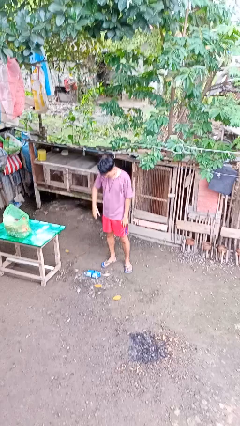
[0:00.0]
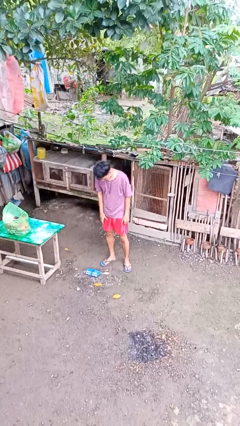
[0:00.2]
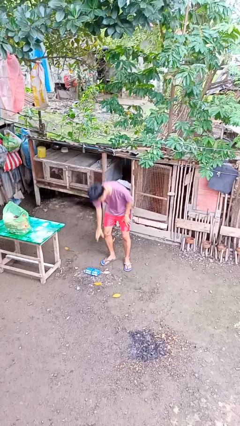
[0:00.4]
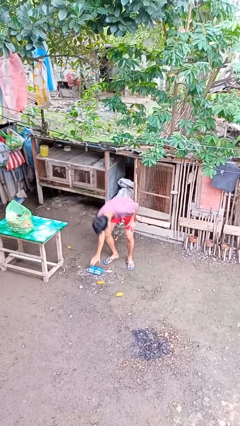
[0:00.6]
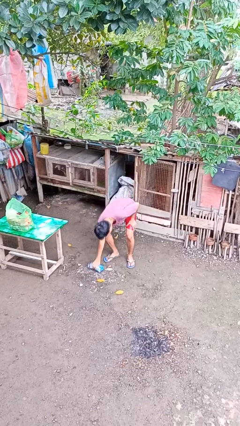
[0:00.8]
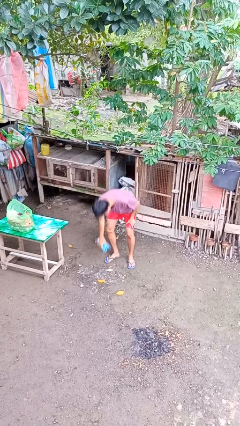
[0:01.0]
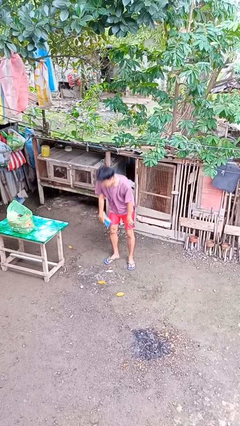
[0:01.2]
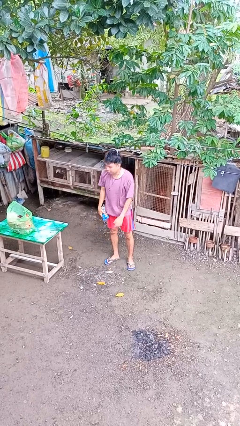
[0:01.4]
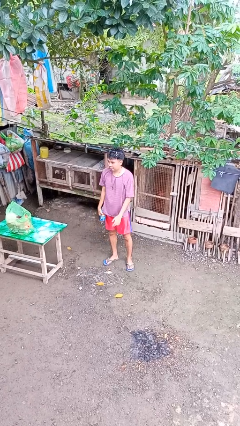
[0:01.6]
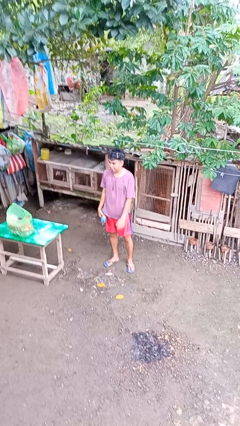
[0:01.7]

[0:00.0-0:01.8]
person picks up object from floor

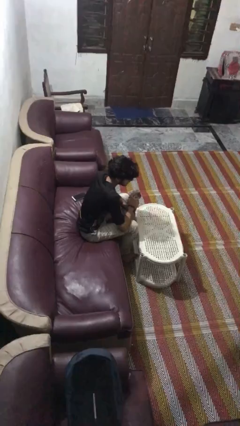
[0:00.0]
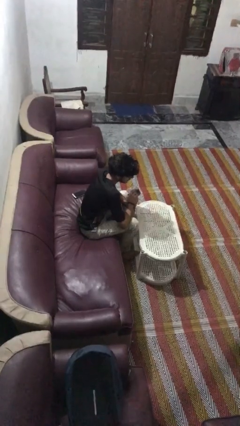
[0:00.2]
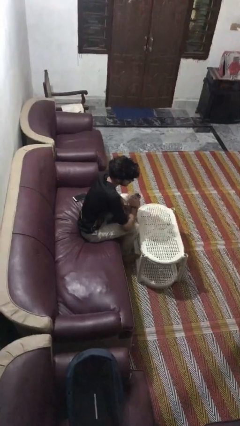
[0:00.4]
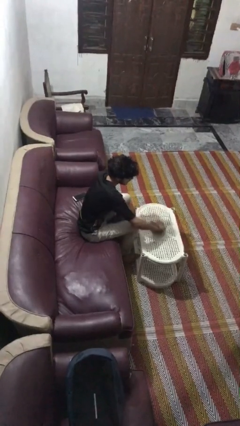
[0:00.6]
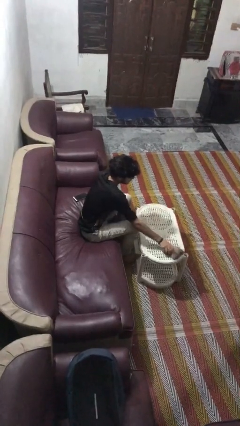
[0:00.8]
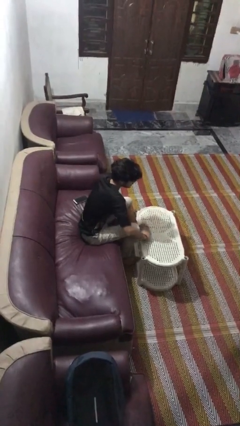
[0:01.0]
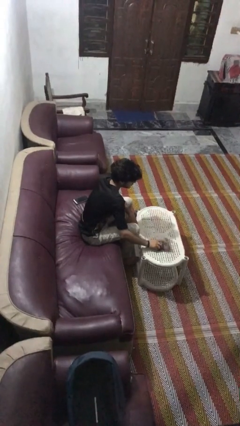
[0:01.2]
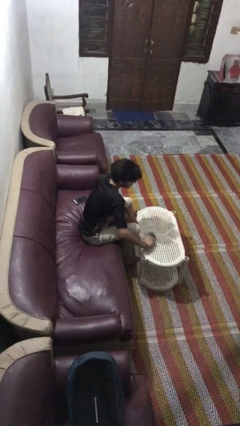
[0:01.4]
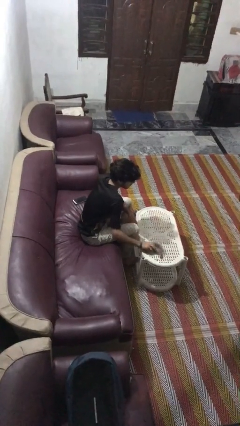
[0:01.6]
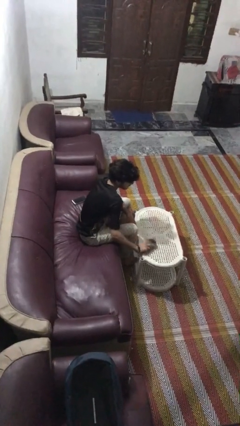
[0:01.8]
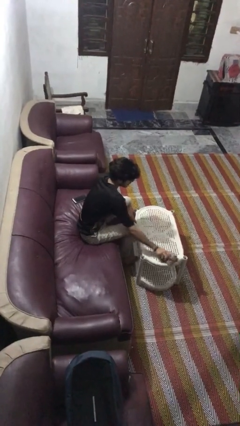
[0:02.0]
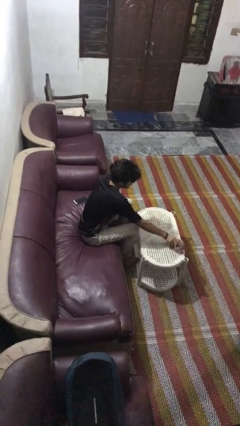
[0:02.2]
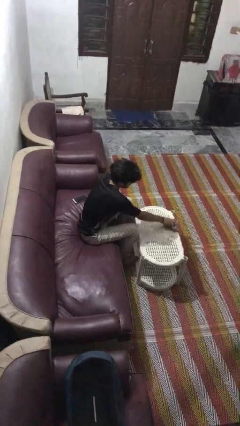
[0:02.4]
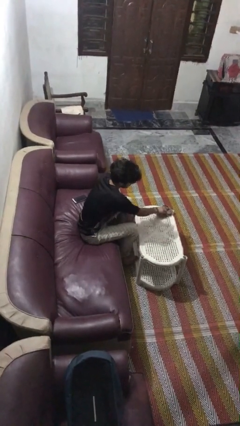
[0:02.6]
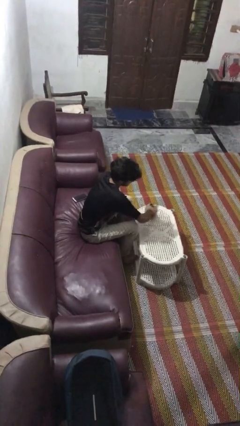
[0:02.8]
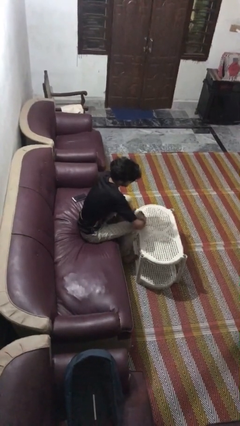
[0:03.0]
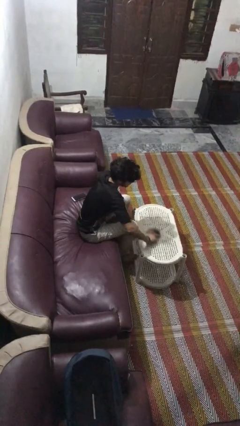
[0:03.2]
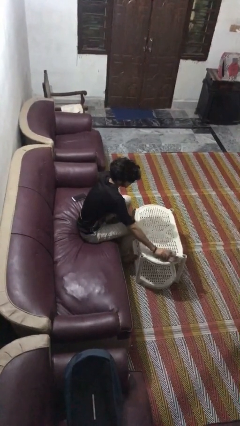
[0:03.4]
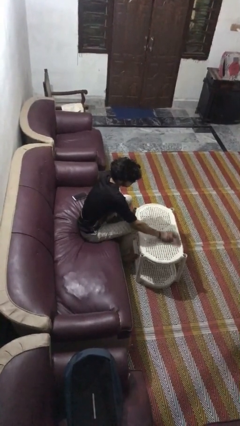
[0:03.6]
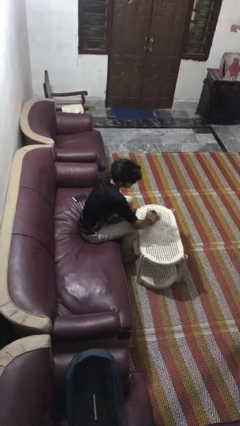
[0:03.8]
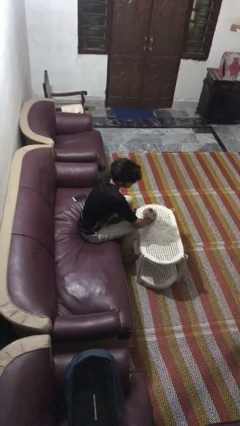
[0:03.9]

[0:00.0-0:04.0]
person cleans table with rag

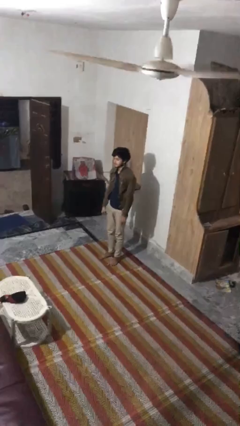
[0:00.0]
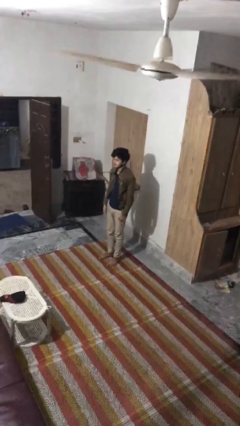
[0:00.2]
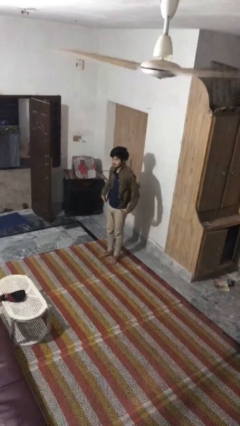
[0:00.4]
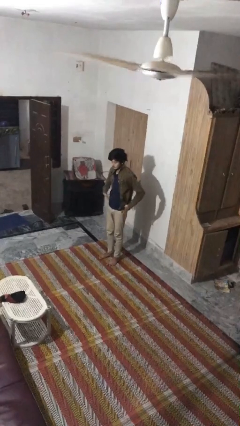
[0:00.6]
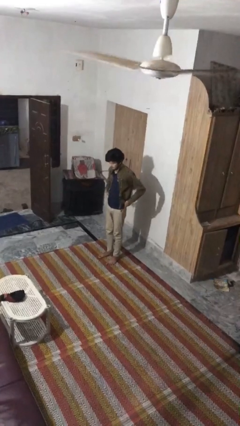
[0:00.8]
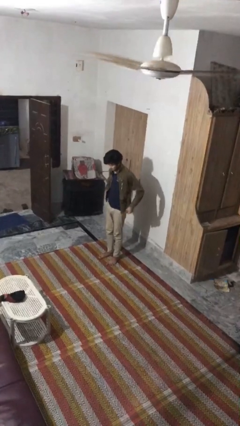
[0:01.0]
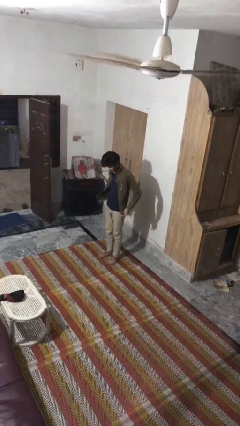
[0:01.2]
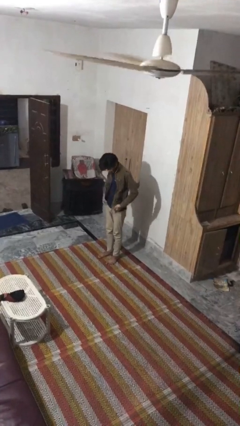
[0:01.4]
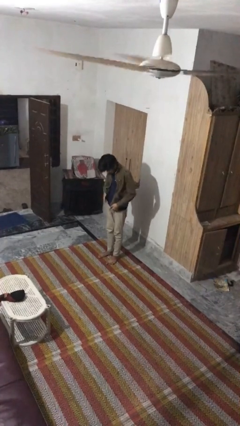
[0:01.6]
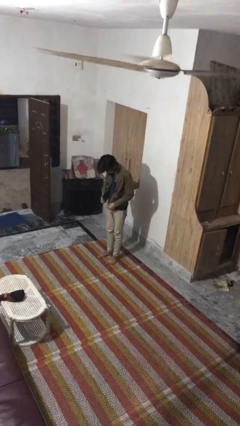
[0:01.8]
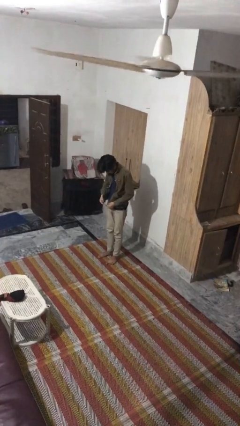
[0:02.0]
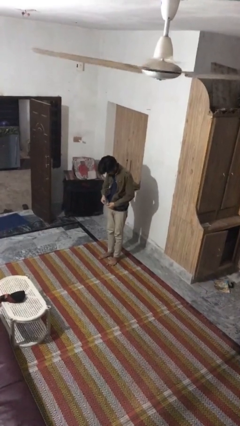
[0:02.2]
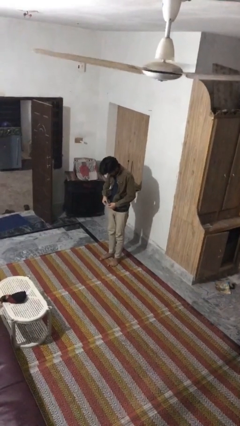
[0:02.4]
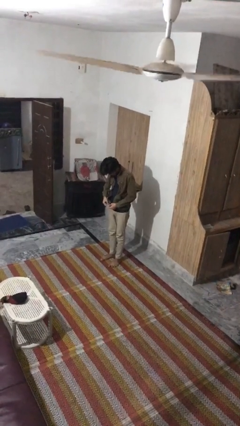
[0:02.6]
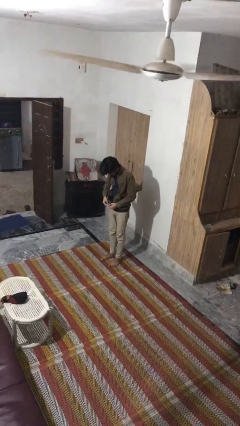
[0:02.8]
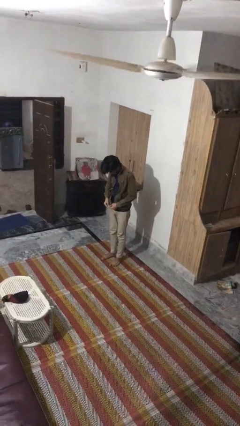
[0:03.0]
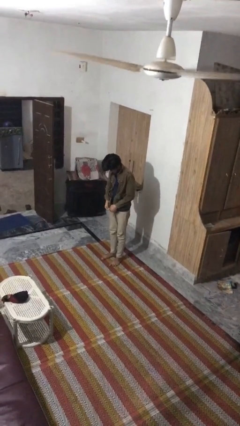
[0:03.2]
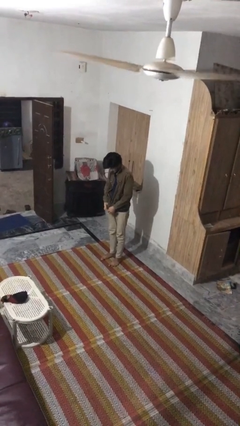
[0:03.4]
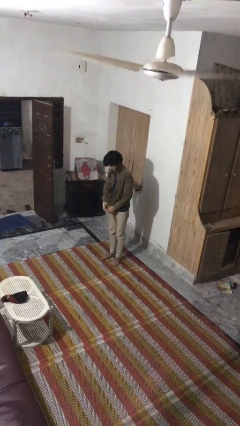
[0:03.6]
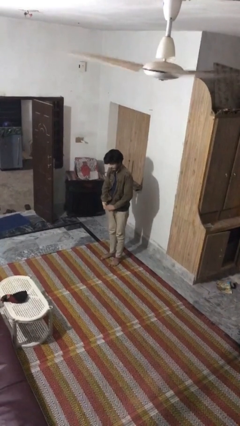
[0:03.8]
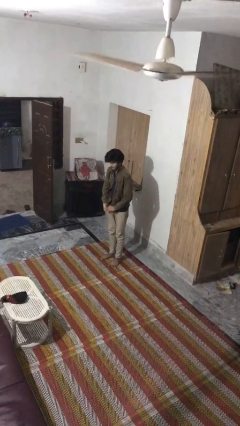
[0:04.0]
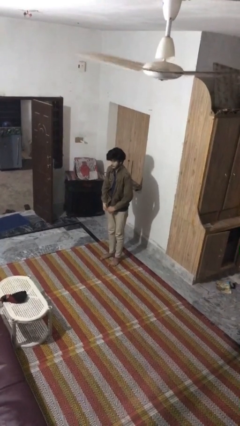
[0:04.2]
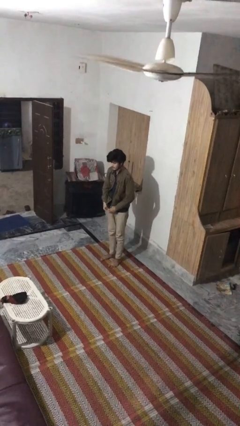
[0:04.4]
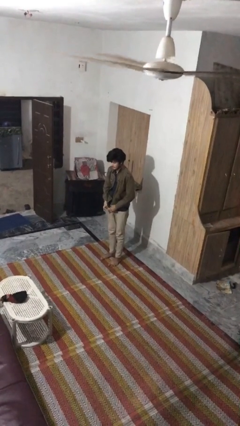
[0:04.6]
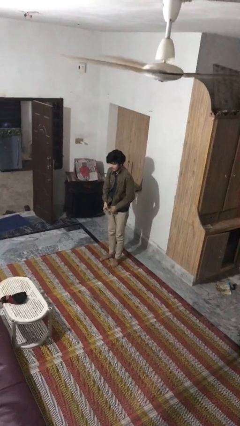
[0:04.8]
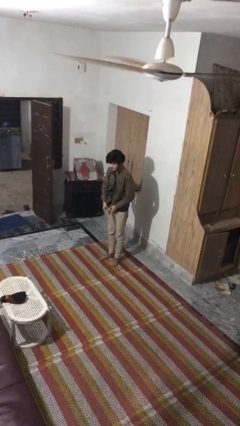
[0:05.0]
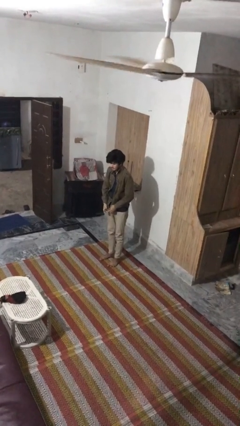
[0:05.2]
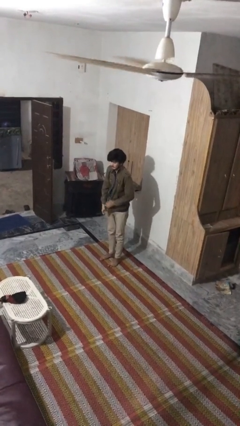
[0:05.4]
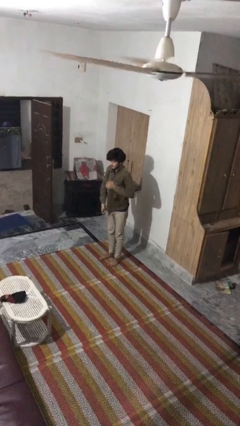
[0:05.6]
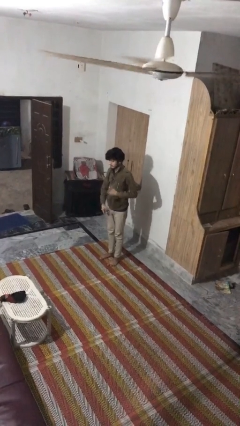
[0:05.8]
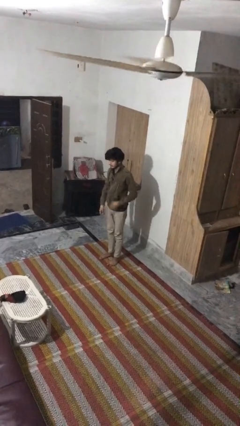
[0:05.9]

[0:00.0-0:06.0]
person zips up jacket

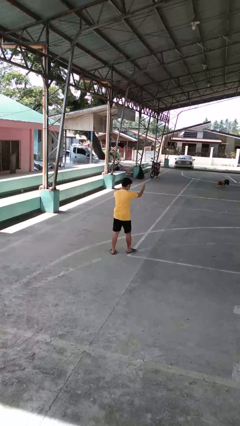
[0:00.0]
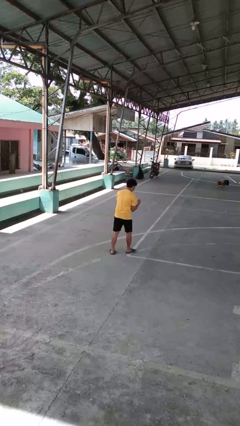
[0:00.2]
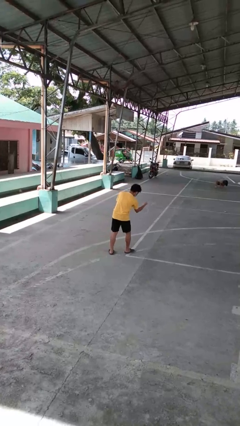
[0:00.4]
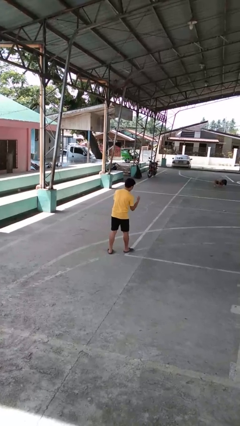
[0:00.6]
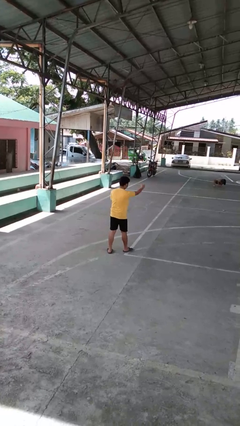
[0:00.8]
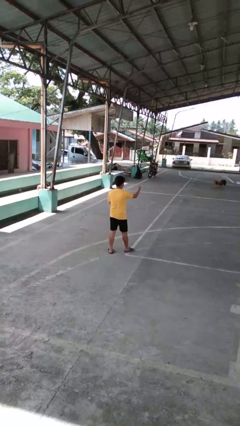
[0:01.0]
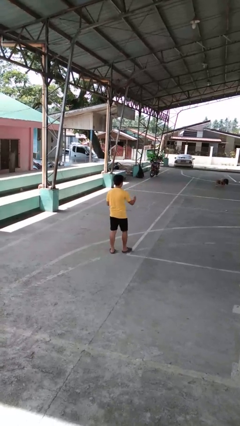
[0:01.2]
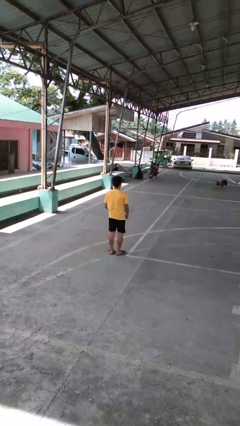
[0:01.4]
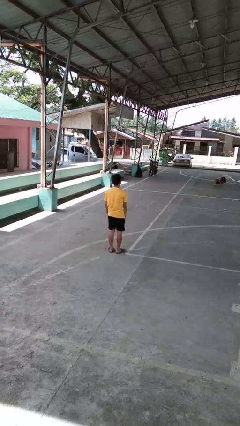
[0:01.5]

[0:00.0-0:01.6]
person punches

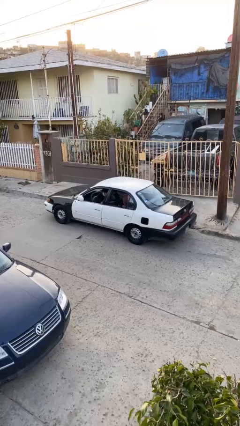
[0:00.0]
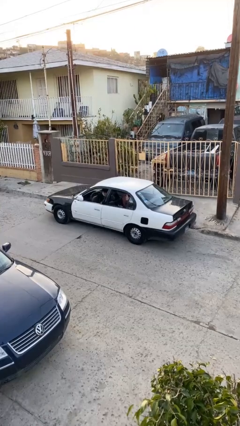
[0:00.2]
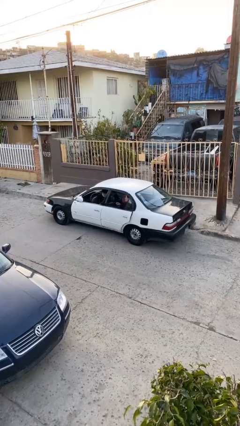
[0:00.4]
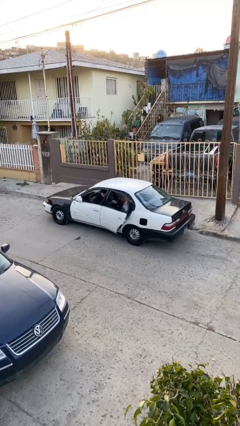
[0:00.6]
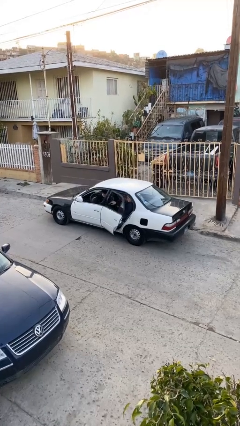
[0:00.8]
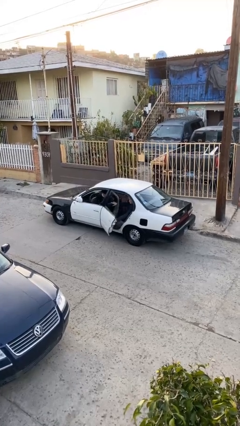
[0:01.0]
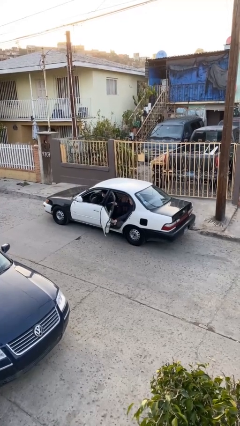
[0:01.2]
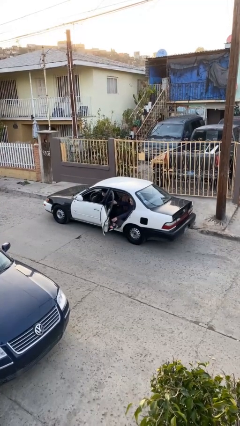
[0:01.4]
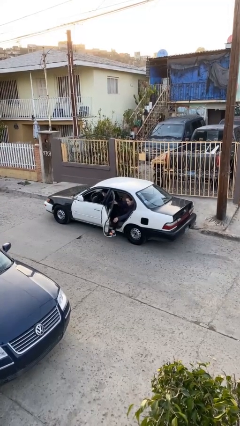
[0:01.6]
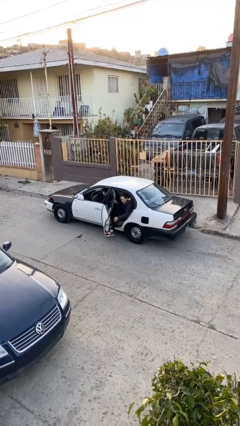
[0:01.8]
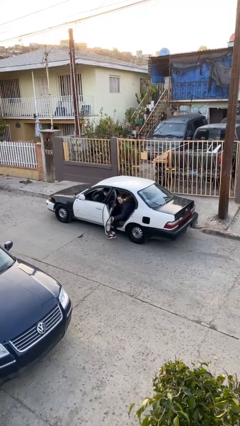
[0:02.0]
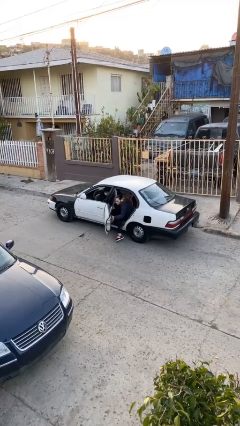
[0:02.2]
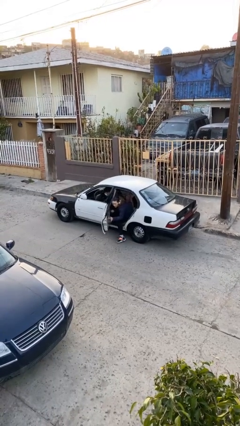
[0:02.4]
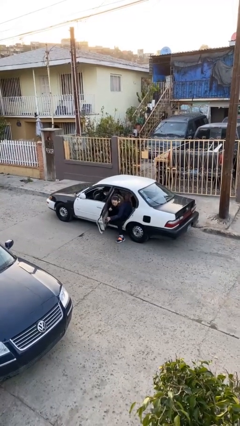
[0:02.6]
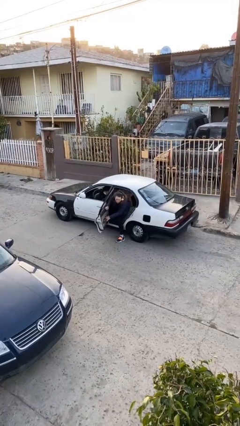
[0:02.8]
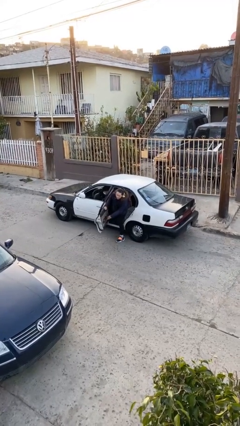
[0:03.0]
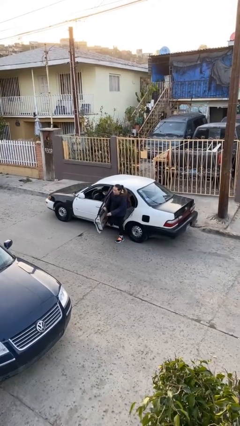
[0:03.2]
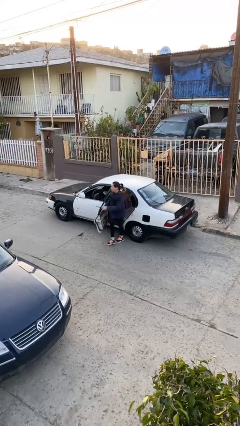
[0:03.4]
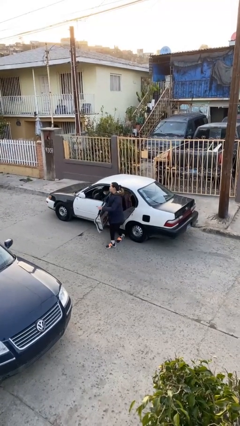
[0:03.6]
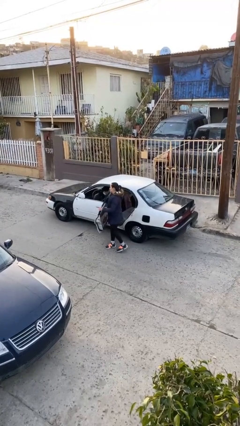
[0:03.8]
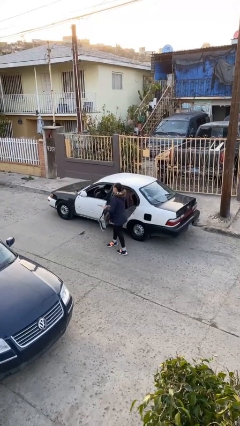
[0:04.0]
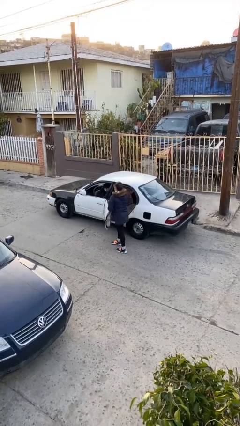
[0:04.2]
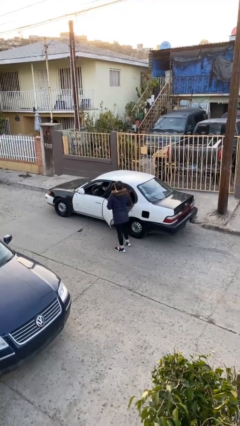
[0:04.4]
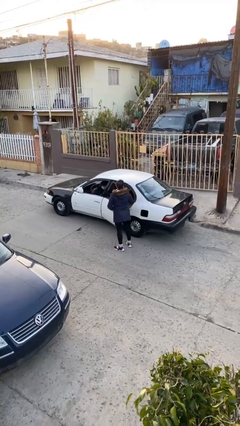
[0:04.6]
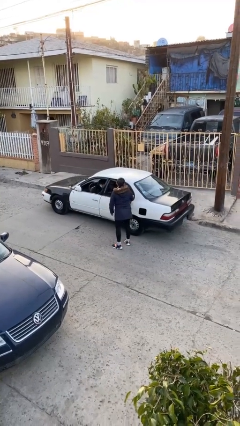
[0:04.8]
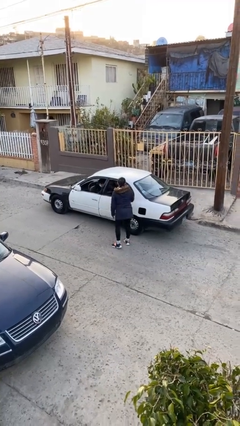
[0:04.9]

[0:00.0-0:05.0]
car drops off person
